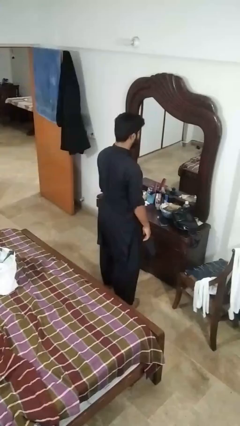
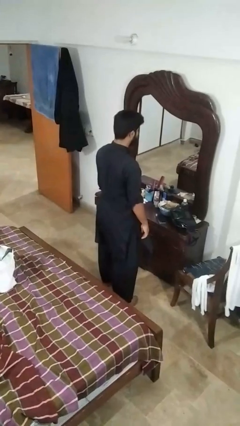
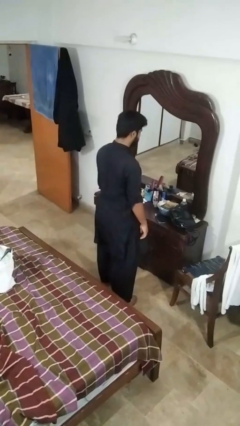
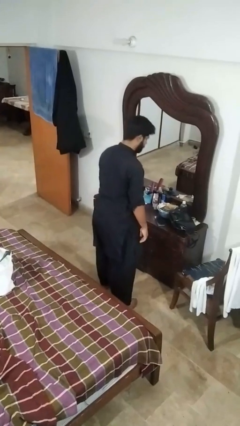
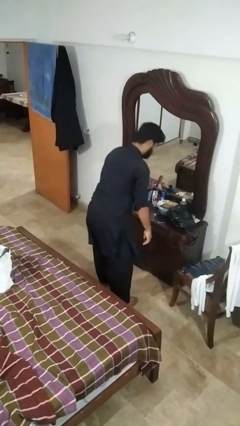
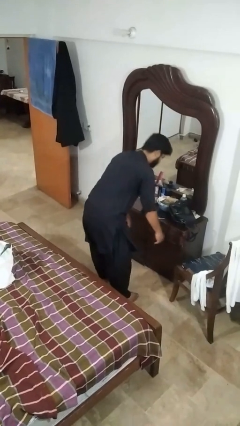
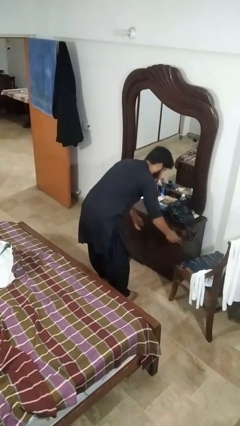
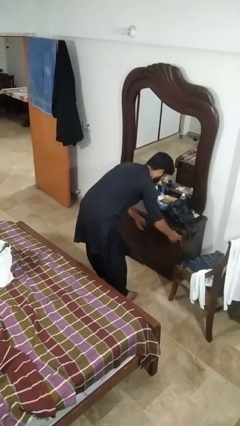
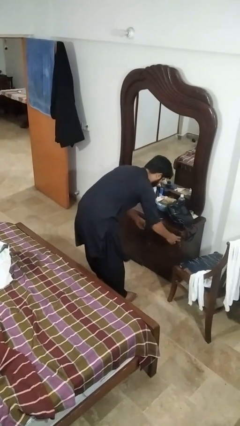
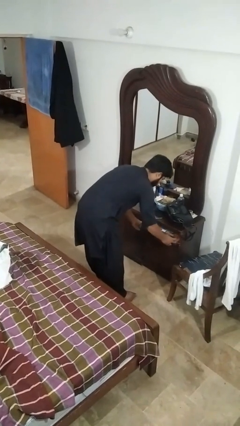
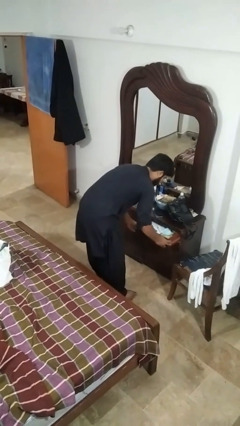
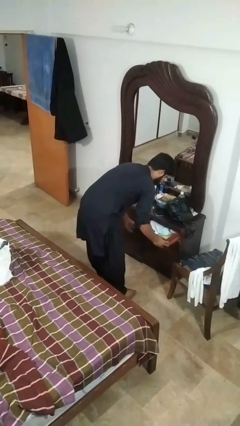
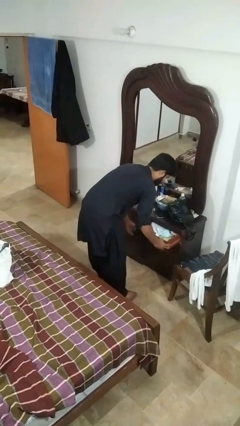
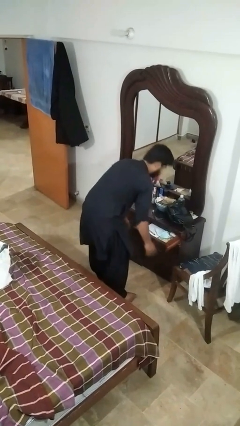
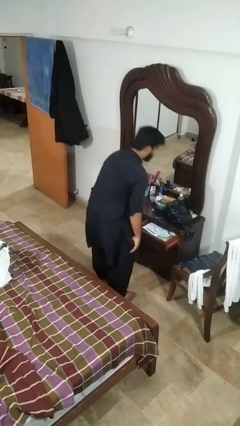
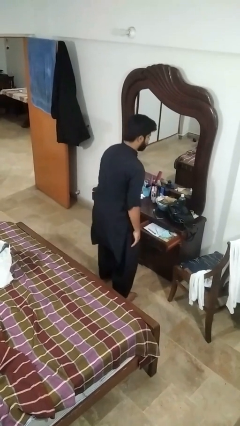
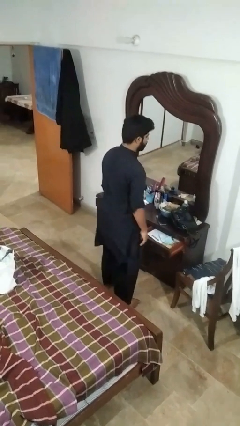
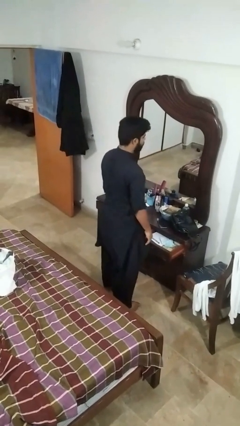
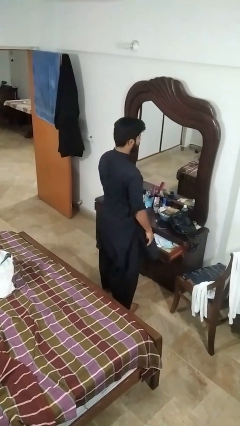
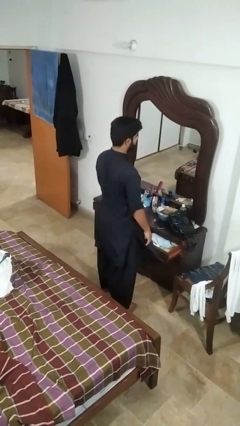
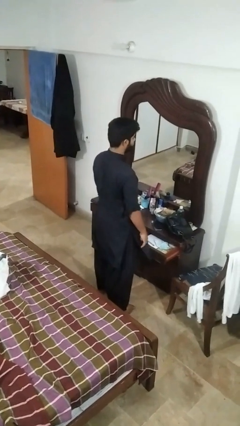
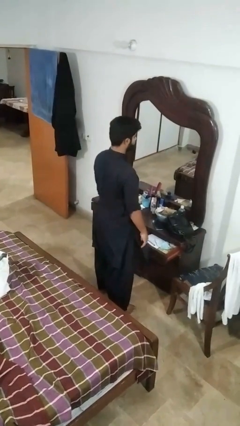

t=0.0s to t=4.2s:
person opens dresser drawer

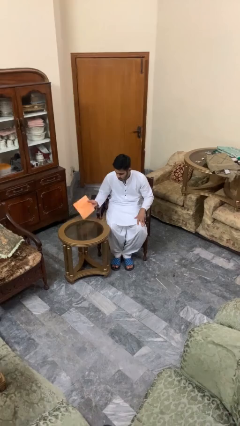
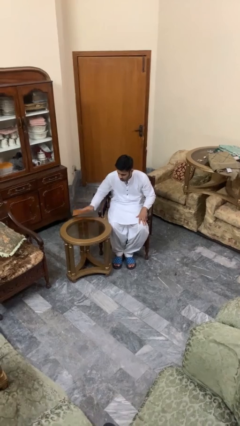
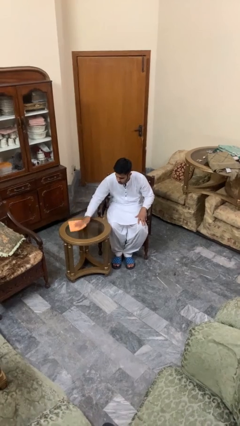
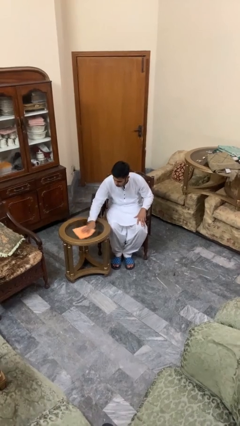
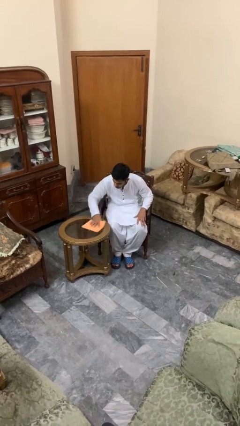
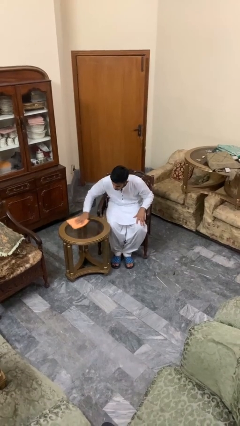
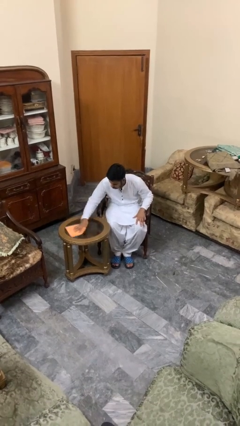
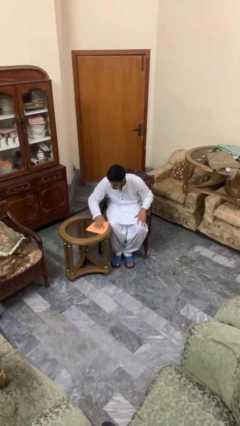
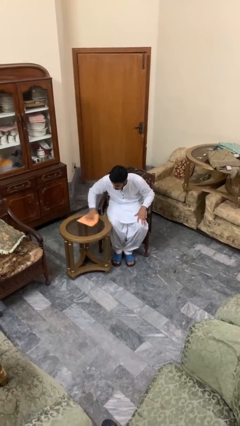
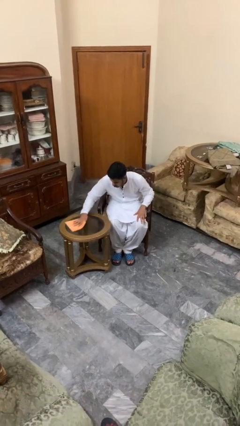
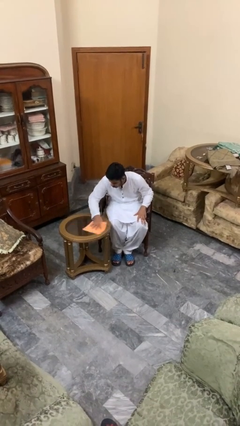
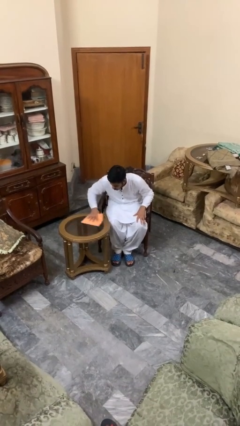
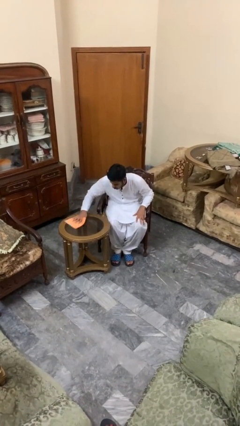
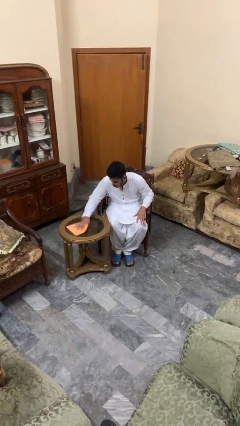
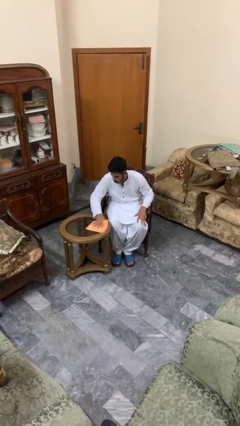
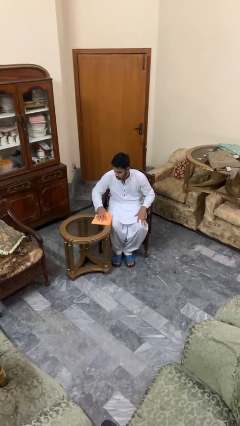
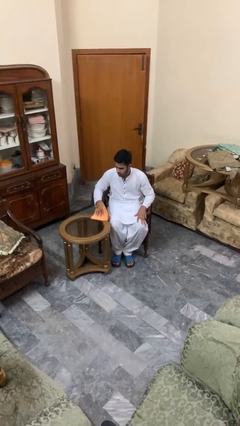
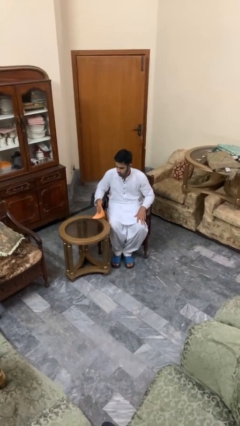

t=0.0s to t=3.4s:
person cleans table with rag

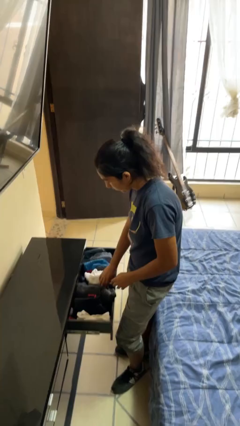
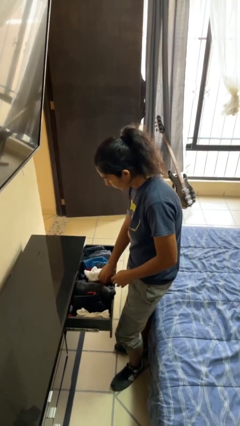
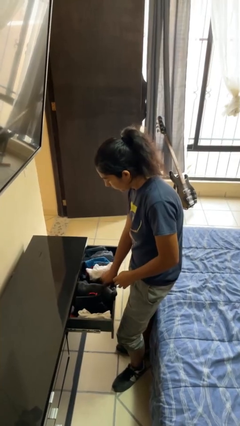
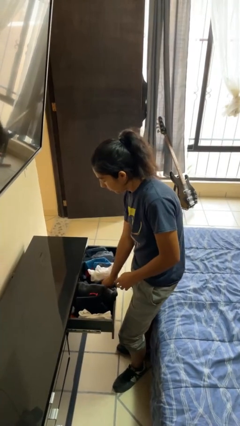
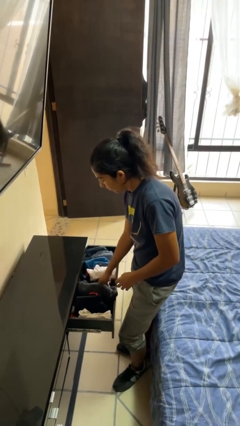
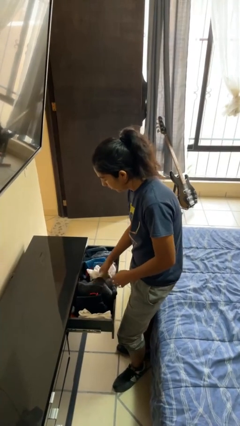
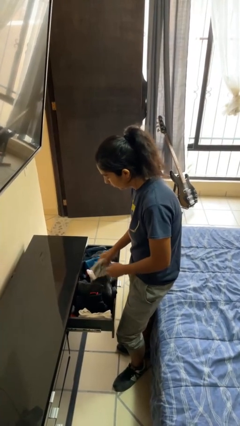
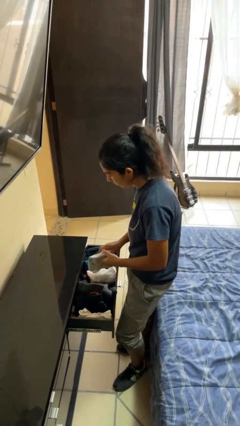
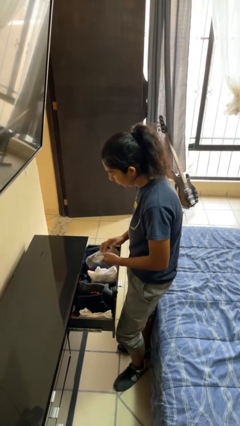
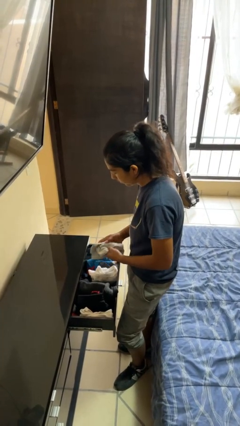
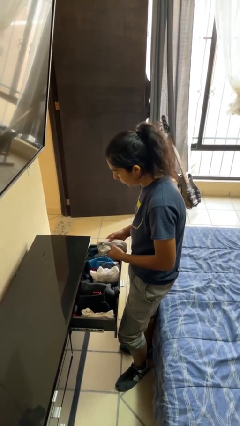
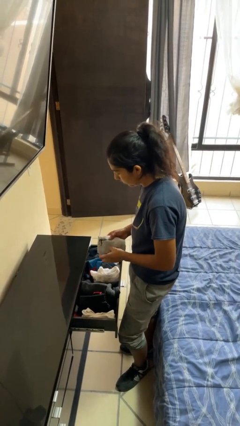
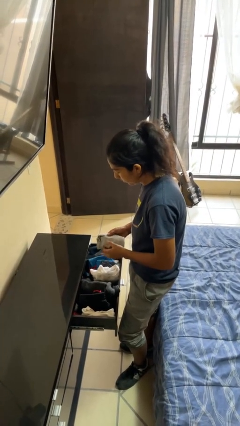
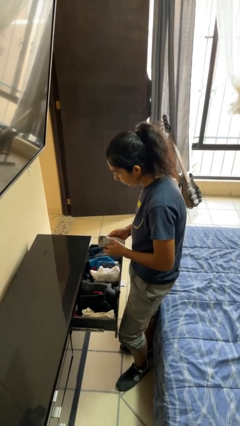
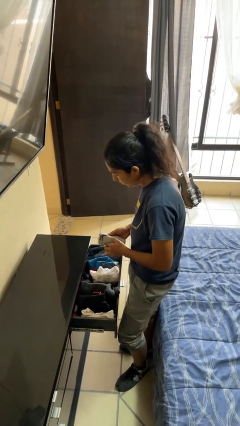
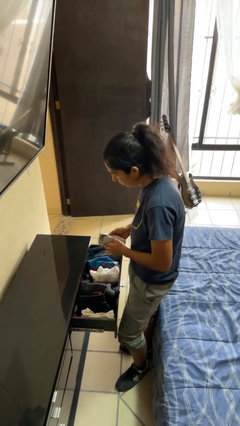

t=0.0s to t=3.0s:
person takes clothes from dresser

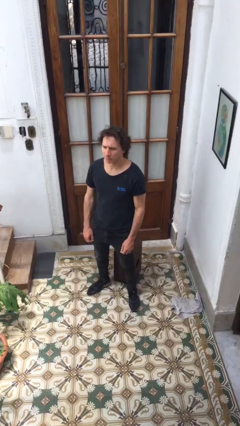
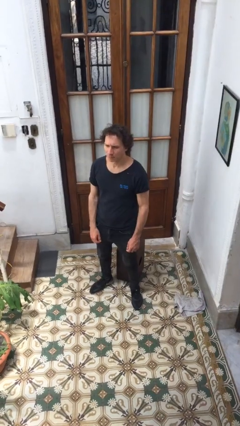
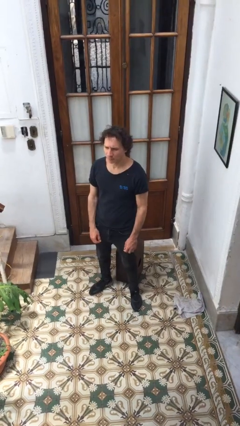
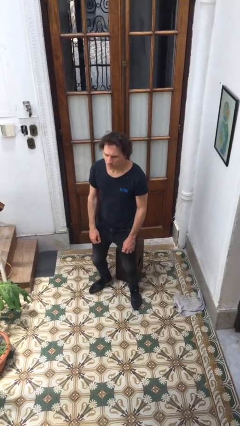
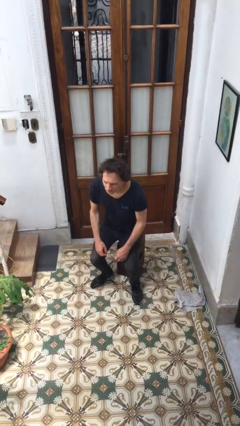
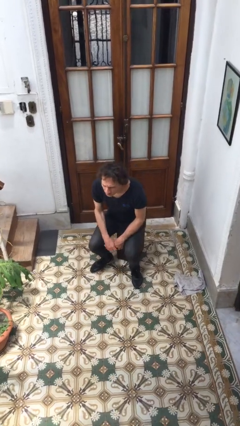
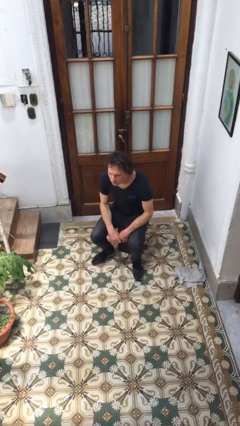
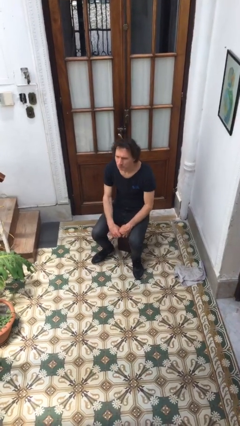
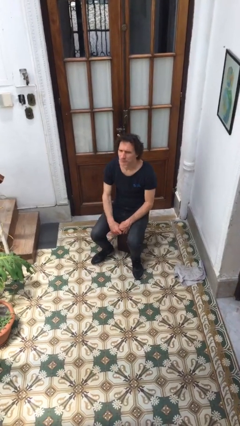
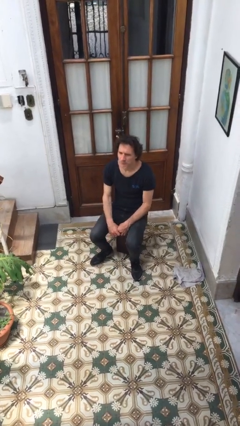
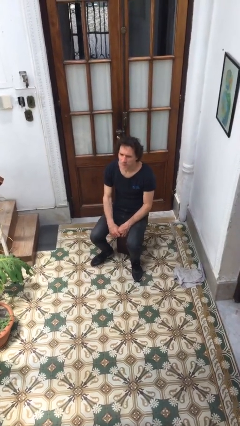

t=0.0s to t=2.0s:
person sits down

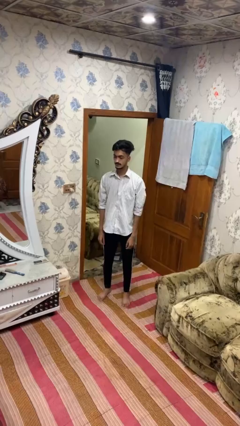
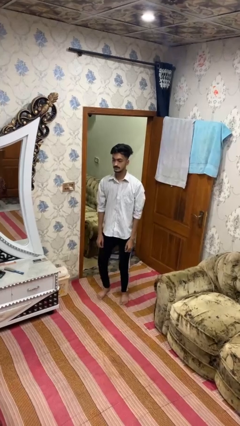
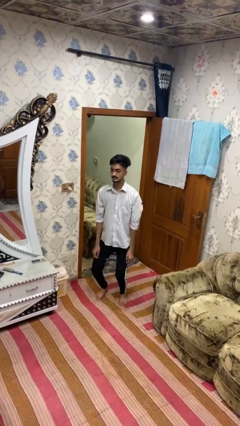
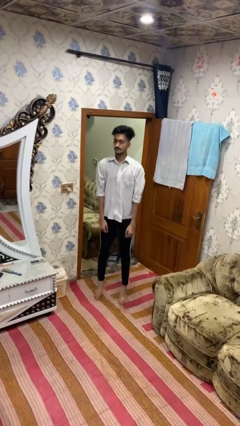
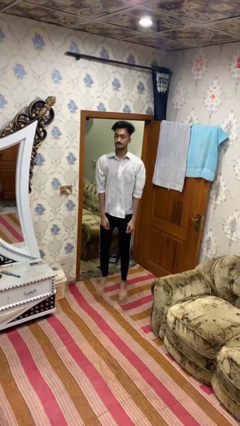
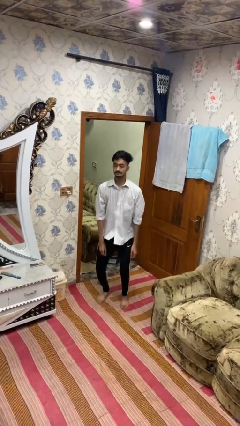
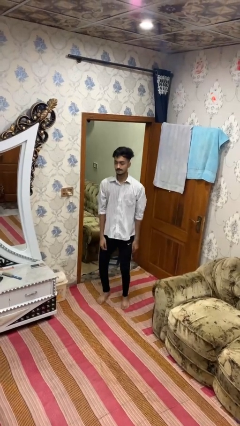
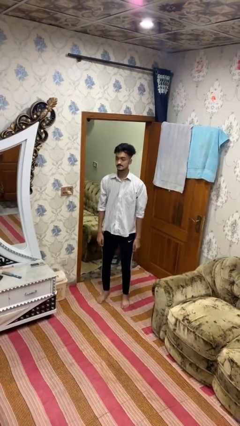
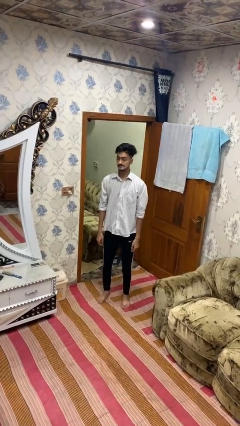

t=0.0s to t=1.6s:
person jumps

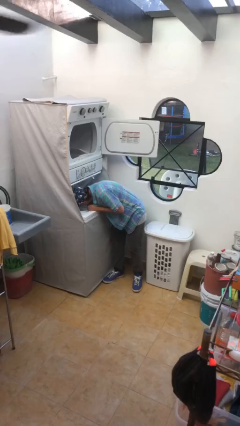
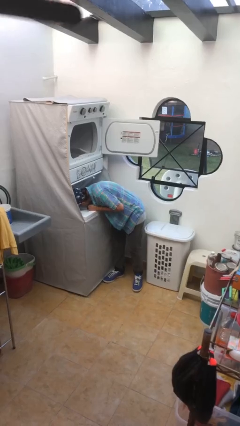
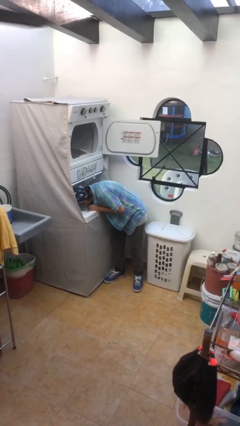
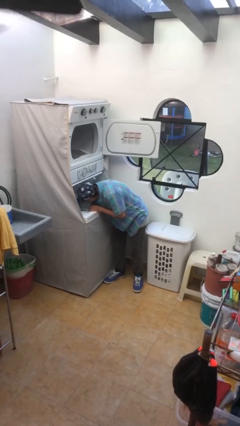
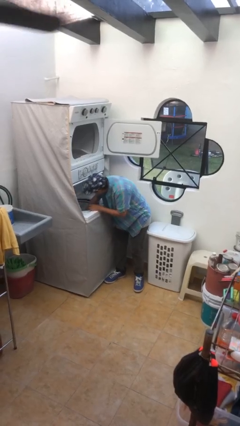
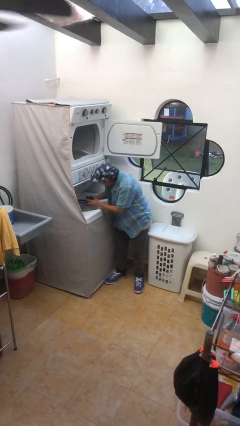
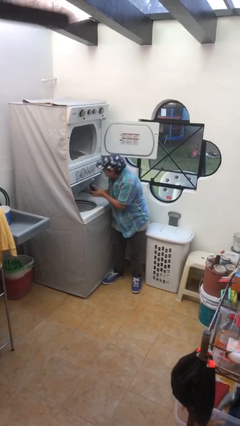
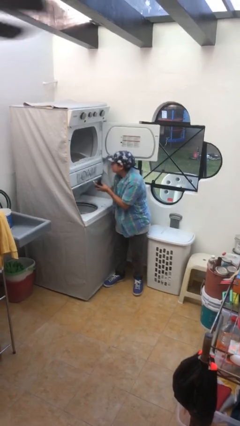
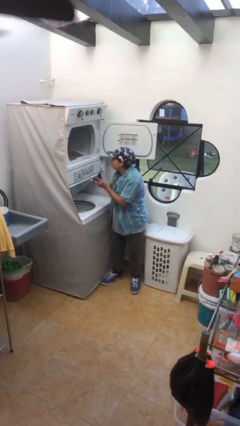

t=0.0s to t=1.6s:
person unloads clotheswasher

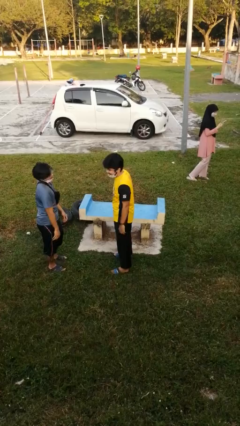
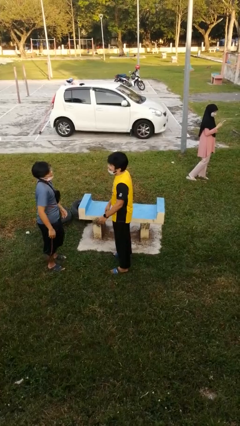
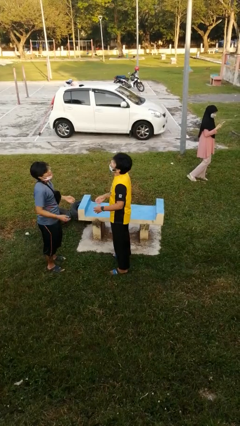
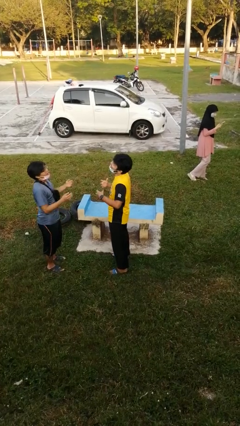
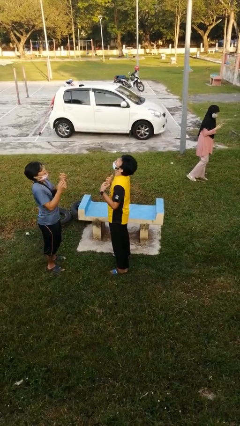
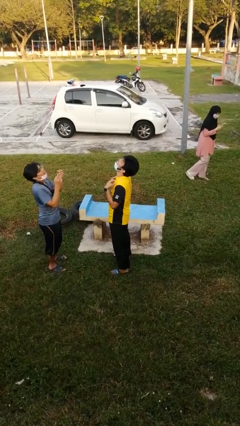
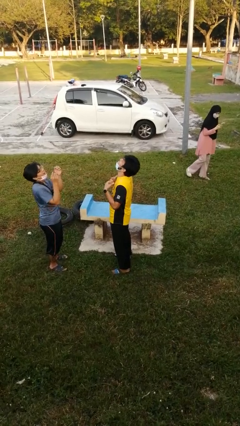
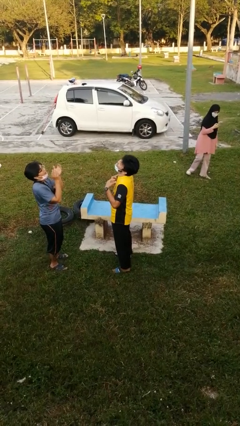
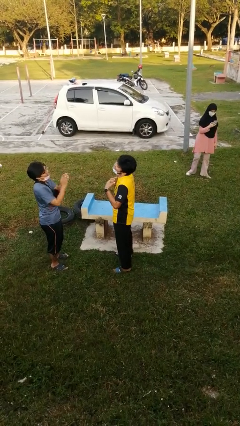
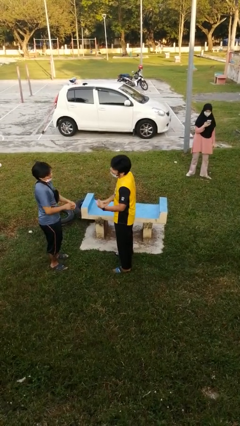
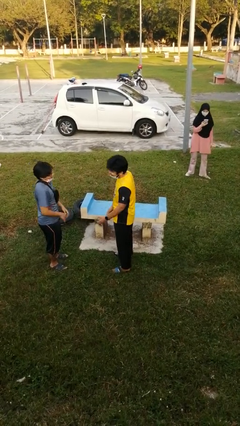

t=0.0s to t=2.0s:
person laughs with person
